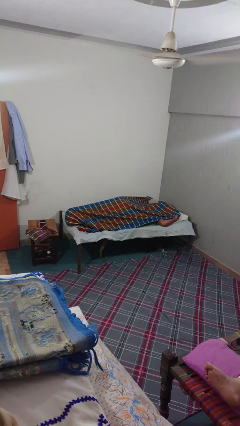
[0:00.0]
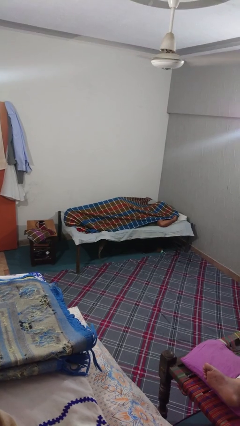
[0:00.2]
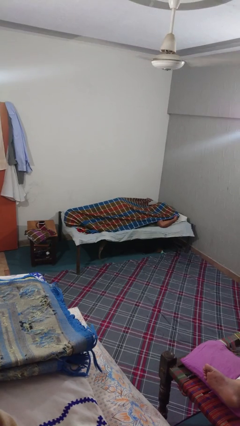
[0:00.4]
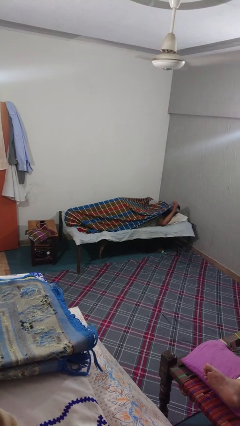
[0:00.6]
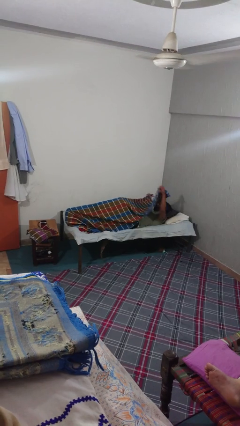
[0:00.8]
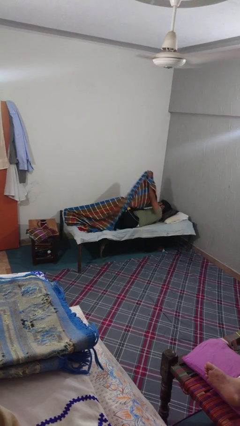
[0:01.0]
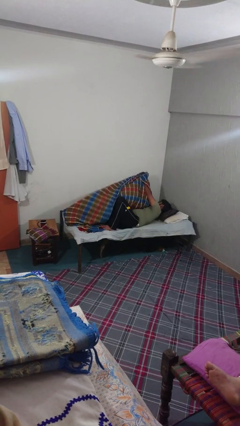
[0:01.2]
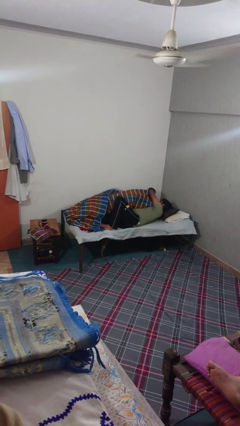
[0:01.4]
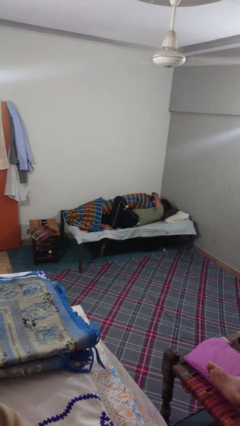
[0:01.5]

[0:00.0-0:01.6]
person uncovers with bedsheets

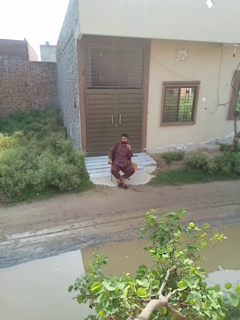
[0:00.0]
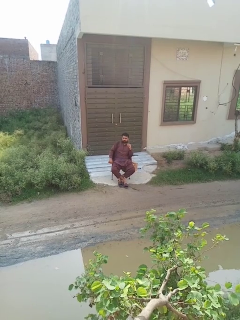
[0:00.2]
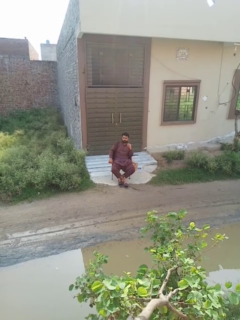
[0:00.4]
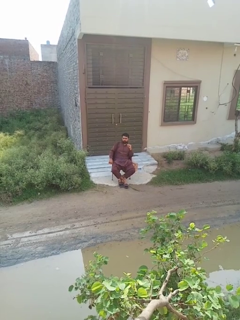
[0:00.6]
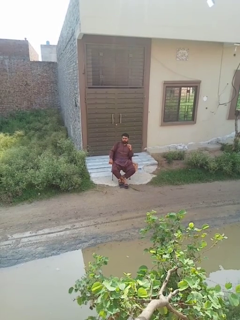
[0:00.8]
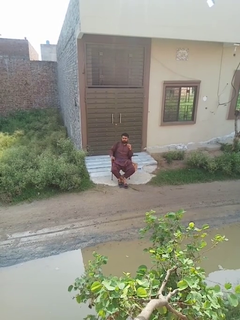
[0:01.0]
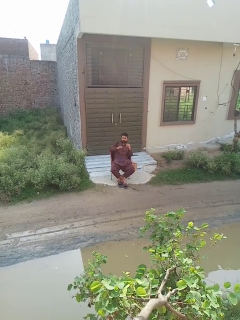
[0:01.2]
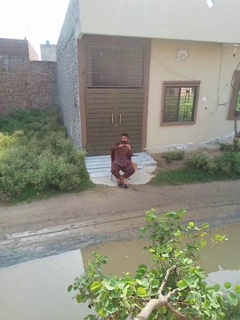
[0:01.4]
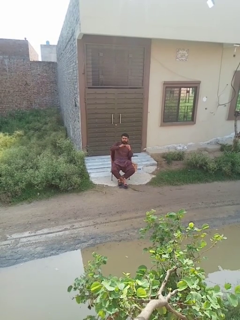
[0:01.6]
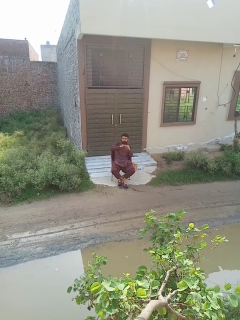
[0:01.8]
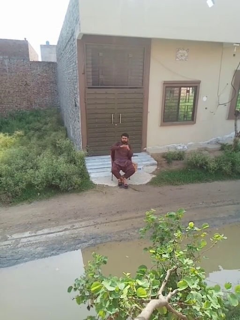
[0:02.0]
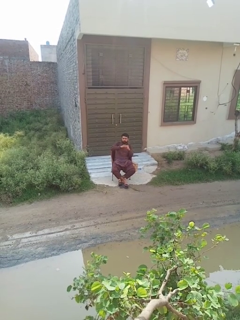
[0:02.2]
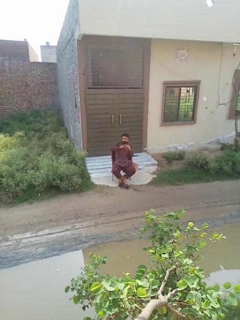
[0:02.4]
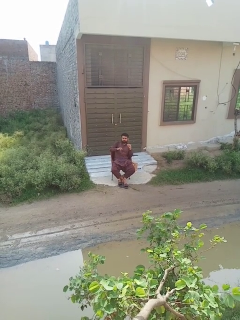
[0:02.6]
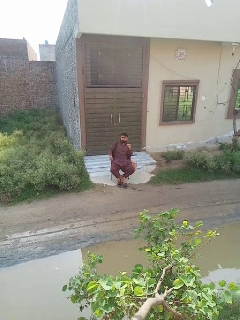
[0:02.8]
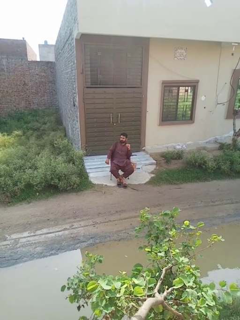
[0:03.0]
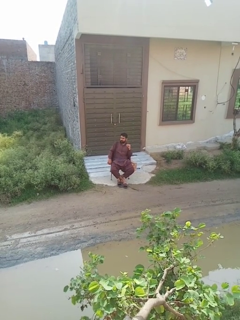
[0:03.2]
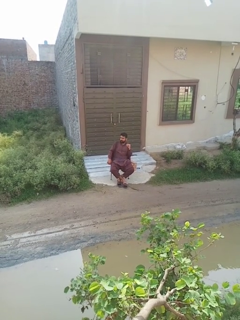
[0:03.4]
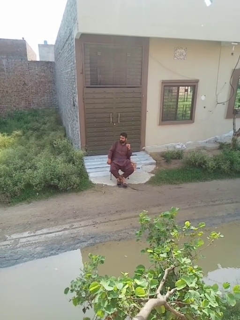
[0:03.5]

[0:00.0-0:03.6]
person puts on ring

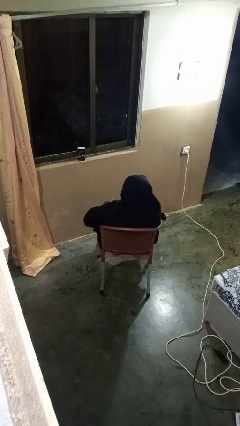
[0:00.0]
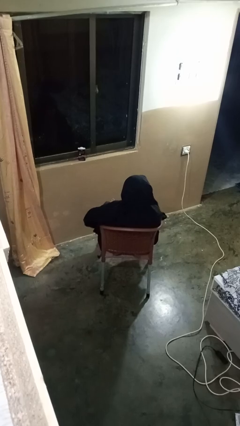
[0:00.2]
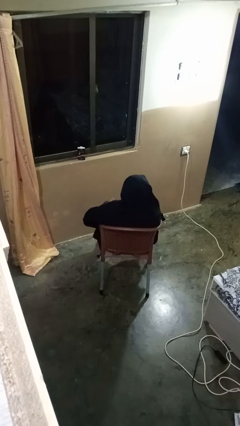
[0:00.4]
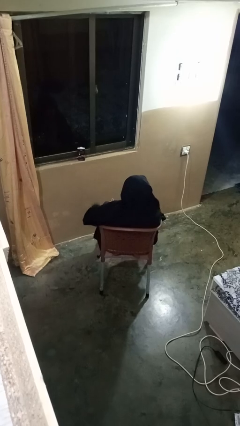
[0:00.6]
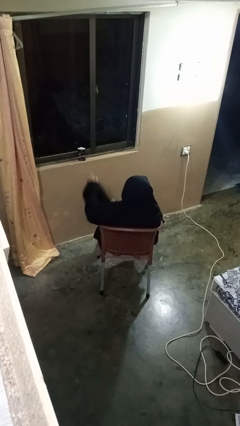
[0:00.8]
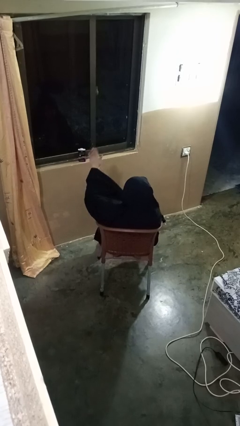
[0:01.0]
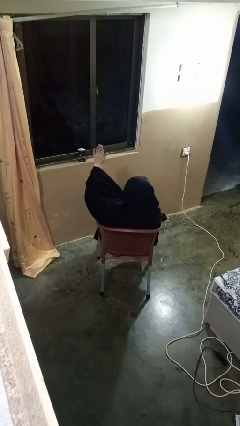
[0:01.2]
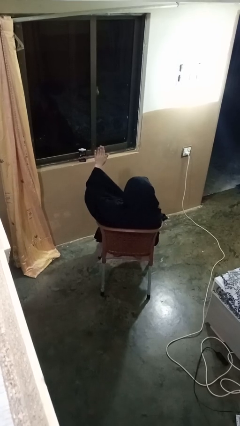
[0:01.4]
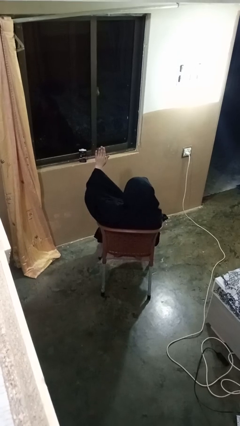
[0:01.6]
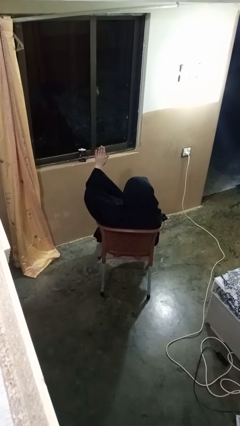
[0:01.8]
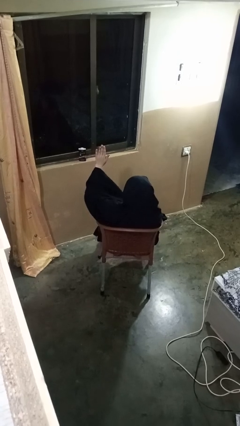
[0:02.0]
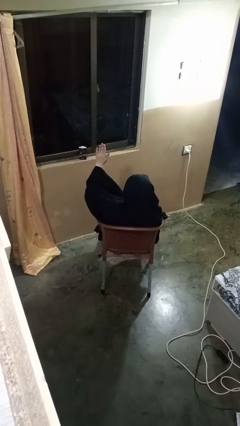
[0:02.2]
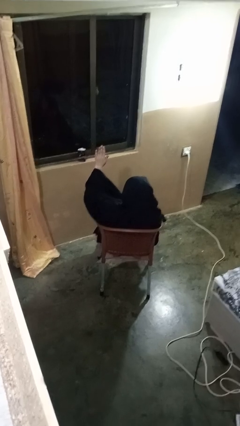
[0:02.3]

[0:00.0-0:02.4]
person gestures raise hand

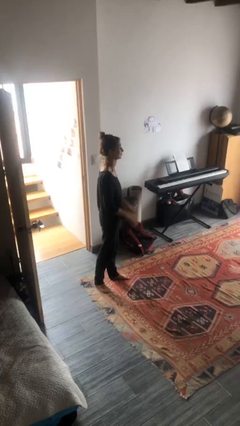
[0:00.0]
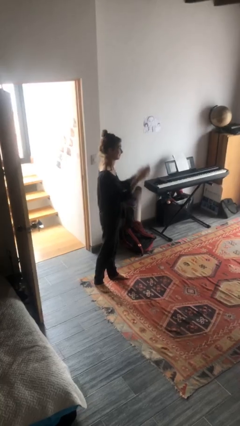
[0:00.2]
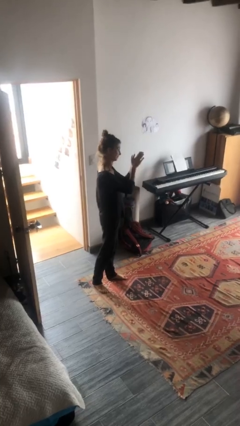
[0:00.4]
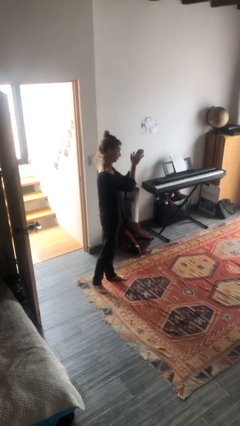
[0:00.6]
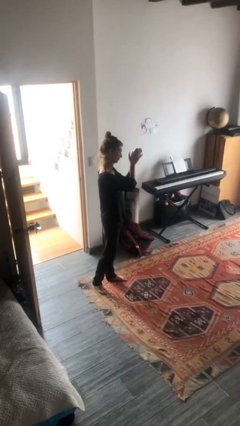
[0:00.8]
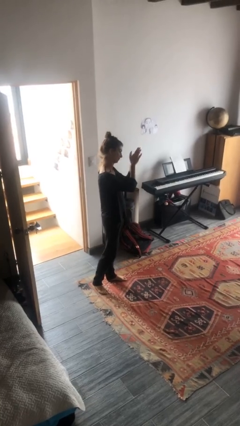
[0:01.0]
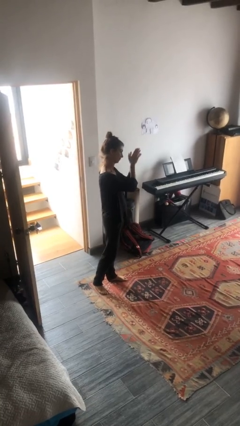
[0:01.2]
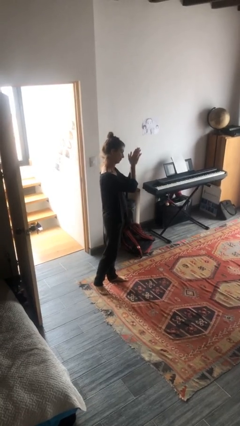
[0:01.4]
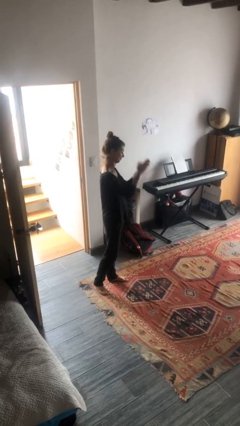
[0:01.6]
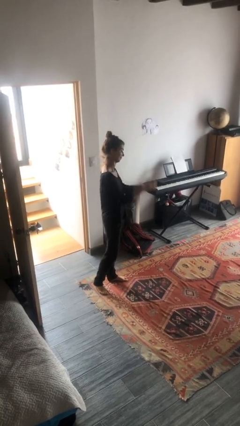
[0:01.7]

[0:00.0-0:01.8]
person claps hands

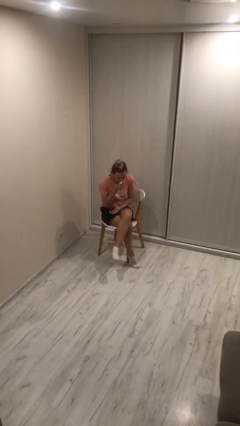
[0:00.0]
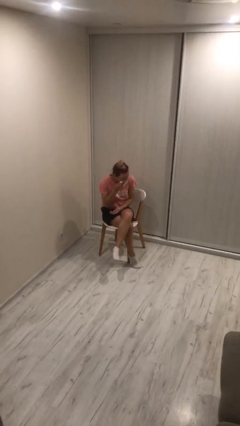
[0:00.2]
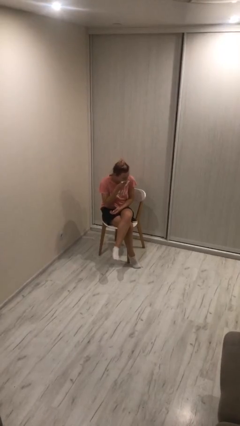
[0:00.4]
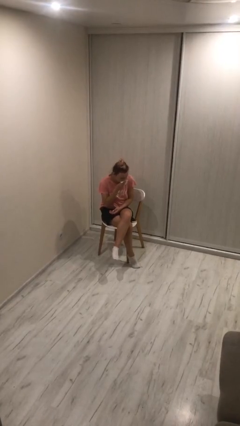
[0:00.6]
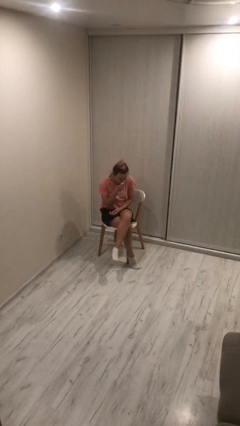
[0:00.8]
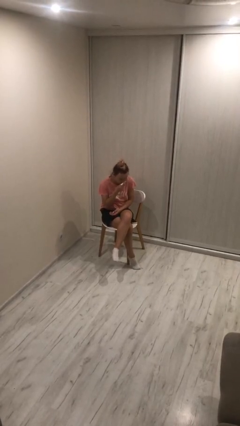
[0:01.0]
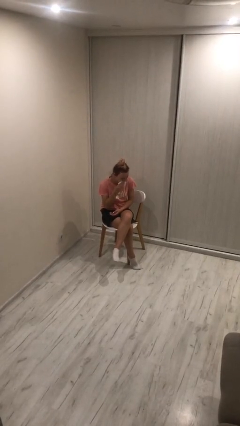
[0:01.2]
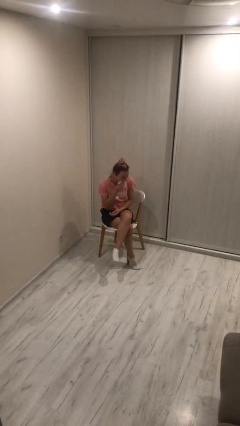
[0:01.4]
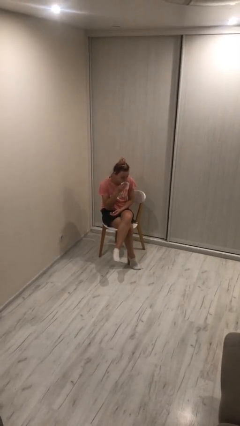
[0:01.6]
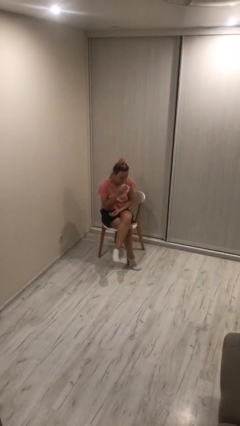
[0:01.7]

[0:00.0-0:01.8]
person wipes mouth with napkin

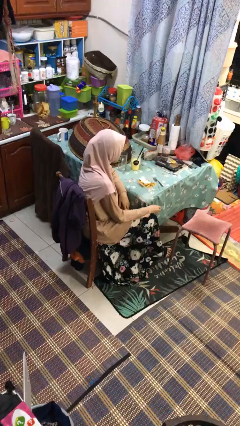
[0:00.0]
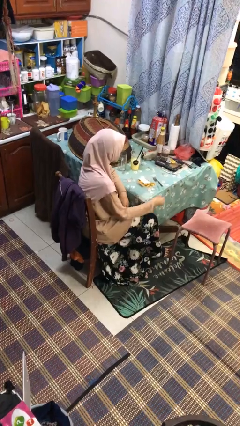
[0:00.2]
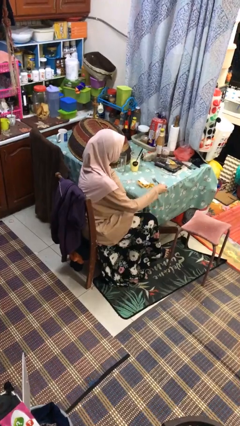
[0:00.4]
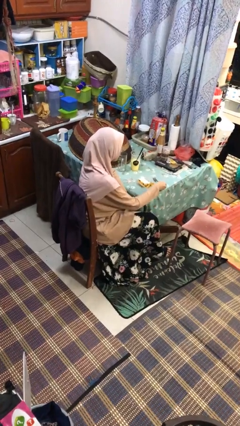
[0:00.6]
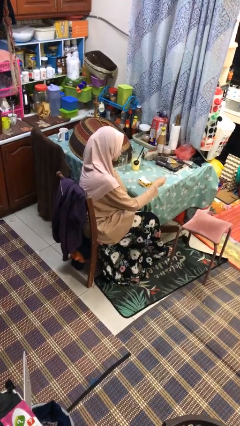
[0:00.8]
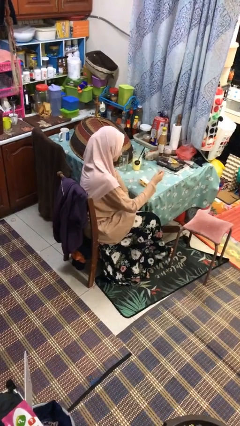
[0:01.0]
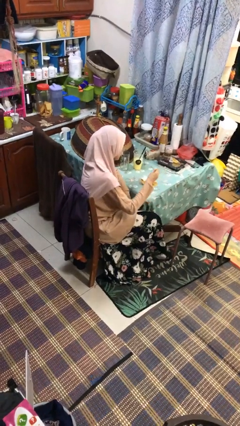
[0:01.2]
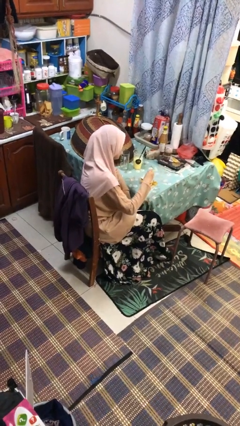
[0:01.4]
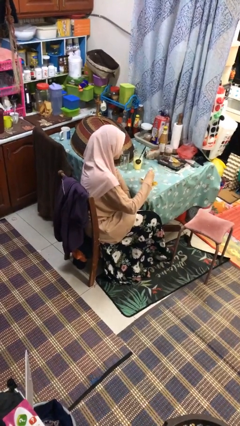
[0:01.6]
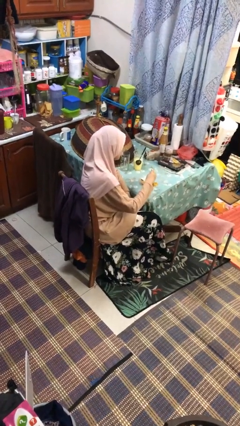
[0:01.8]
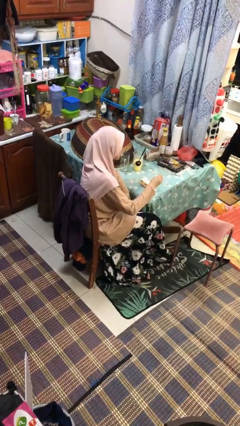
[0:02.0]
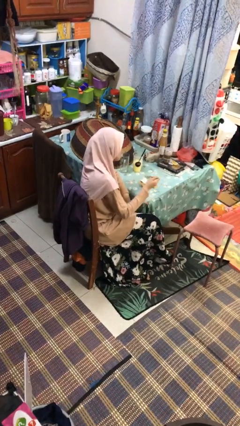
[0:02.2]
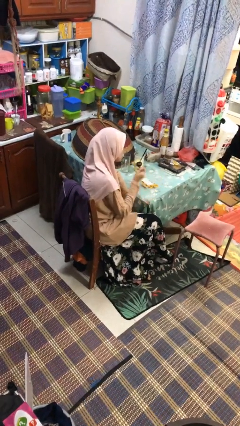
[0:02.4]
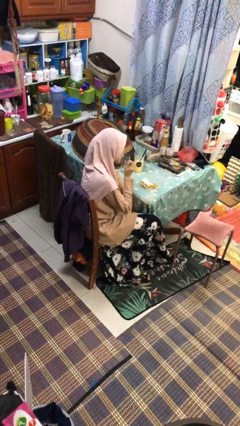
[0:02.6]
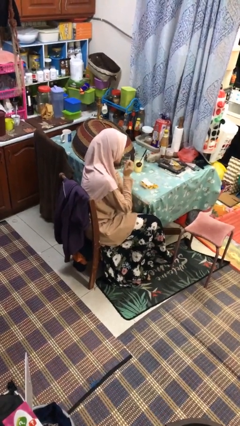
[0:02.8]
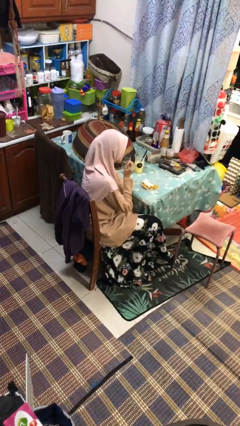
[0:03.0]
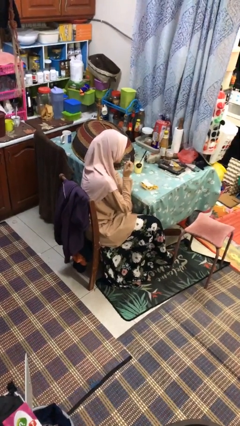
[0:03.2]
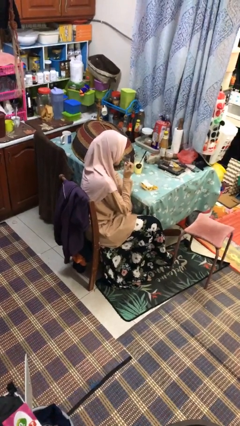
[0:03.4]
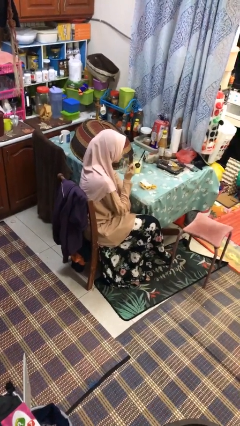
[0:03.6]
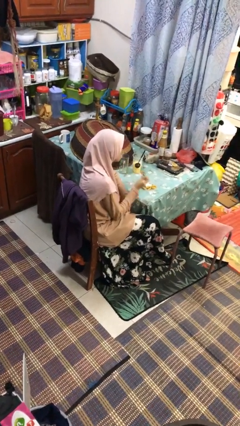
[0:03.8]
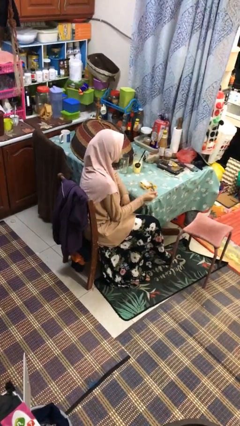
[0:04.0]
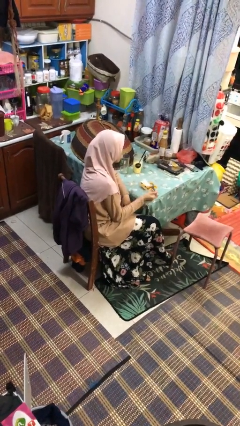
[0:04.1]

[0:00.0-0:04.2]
person eats with utensil

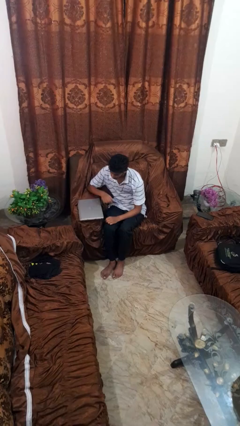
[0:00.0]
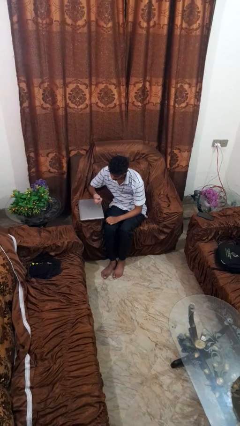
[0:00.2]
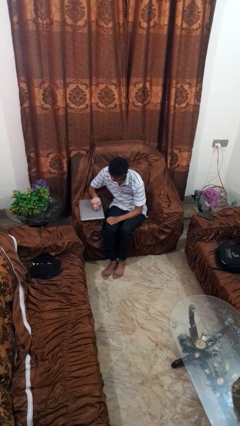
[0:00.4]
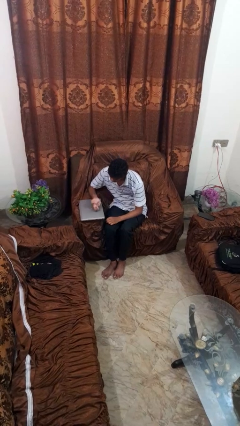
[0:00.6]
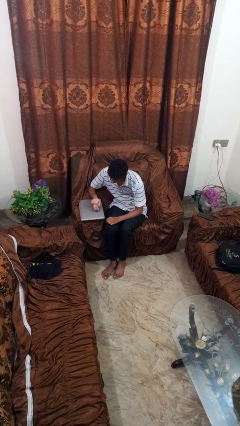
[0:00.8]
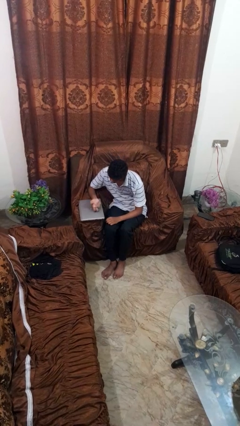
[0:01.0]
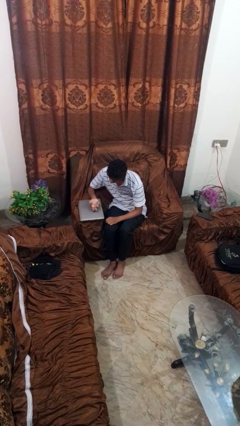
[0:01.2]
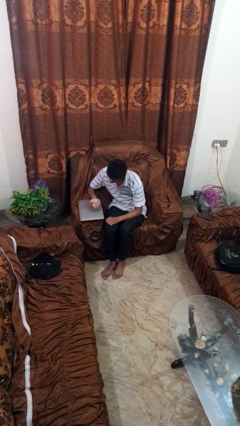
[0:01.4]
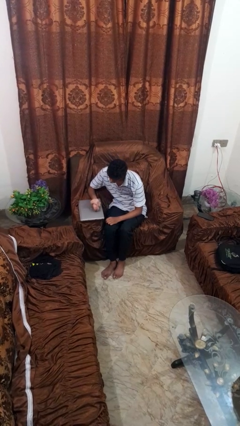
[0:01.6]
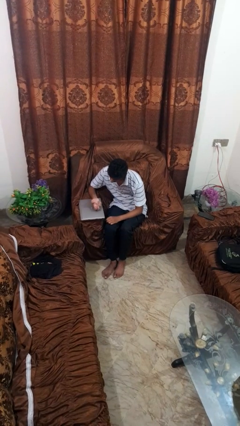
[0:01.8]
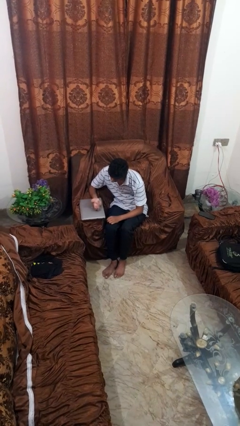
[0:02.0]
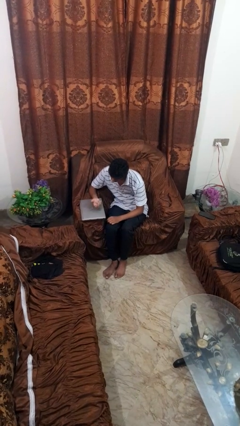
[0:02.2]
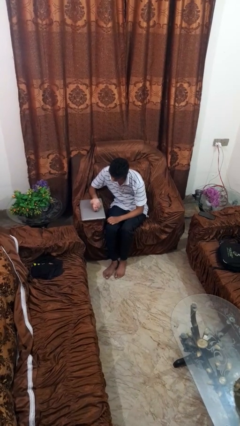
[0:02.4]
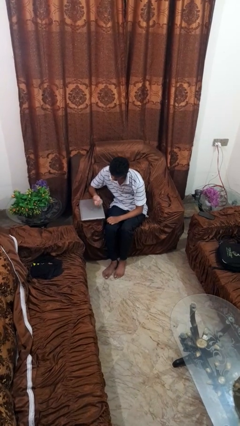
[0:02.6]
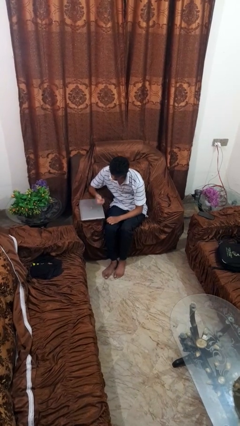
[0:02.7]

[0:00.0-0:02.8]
person taps object with finger
